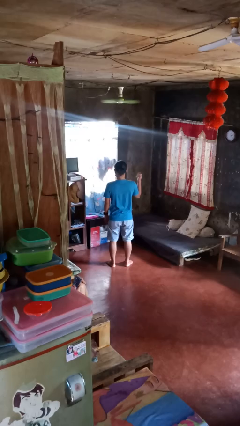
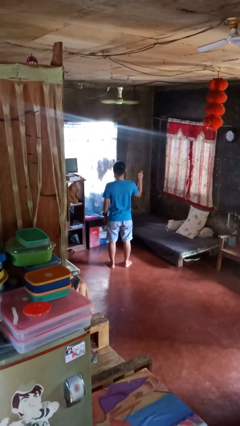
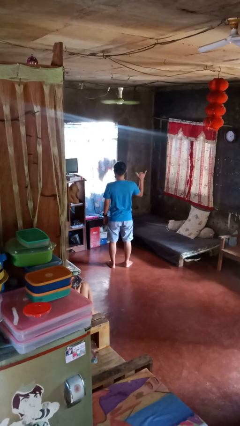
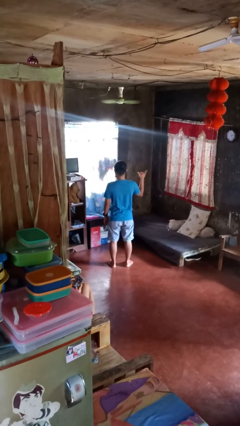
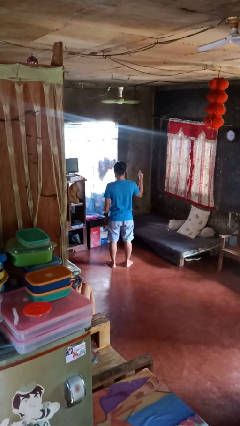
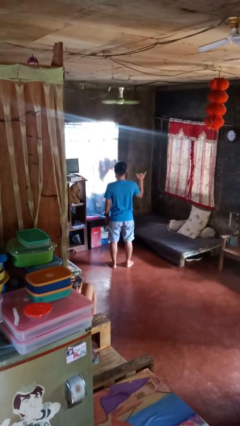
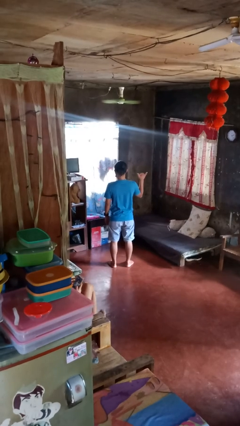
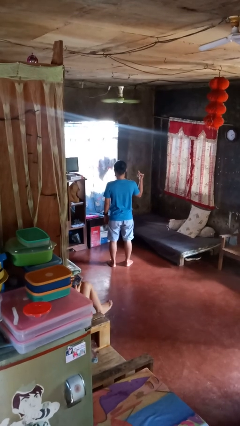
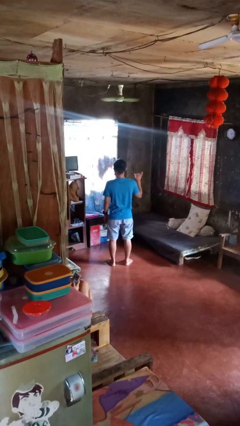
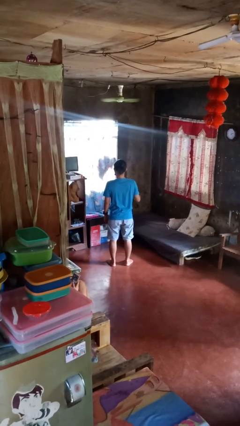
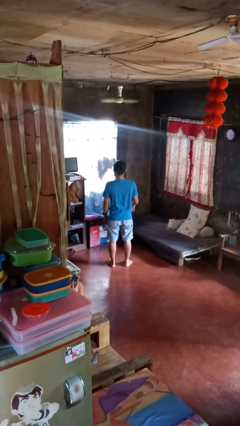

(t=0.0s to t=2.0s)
person gestures hang loose

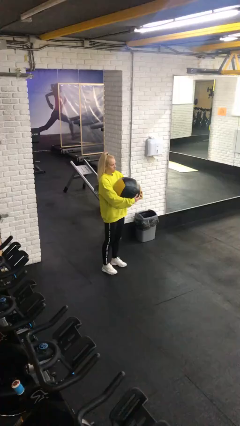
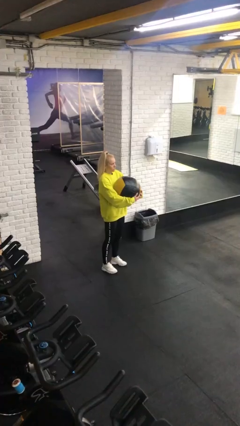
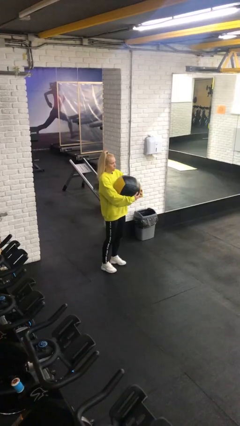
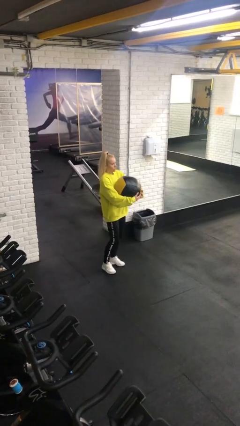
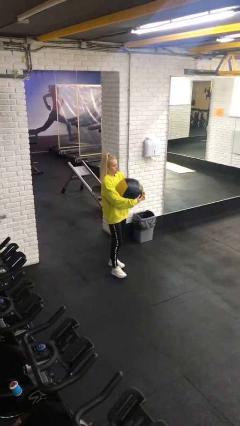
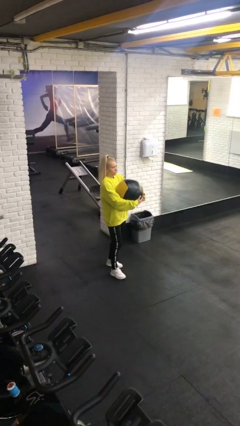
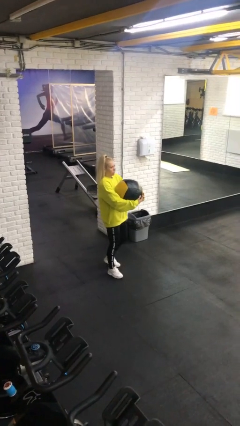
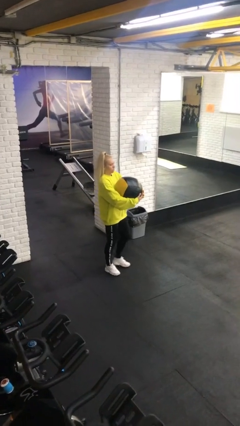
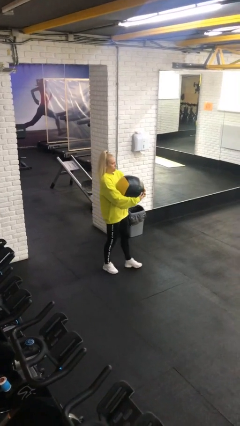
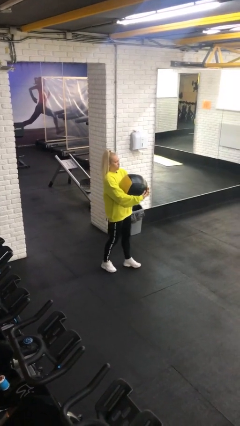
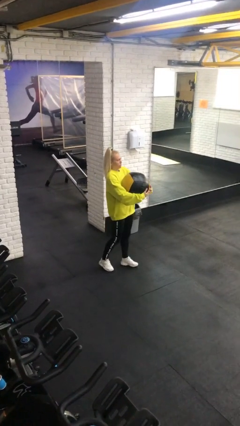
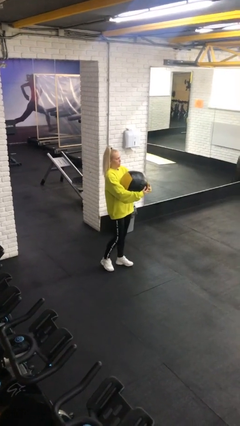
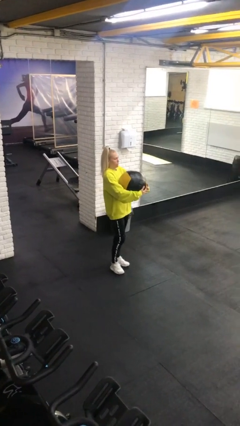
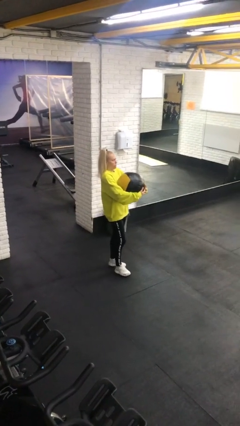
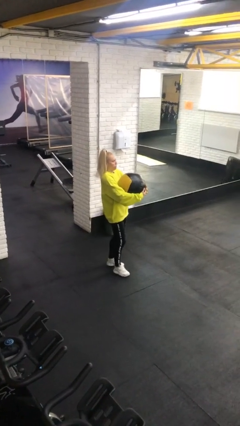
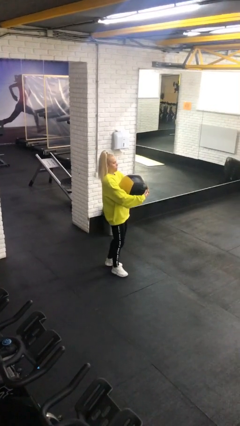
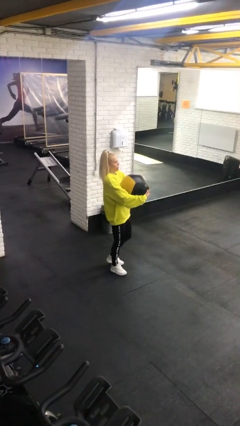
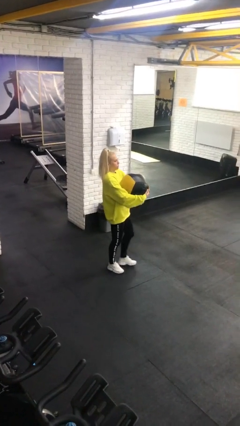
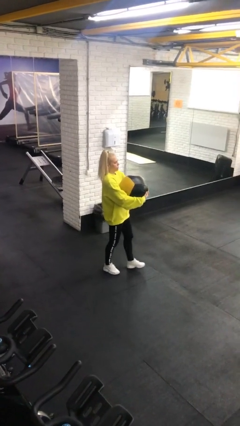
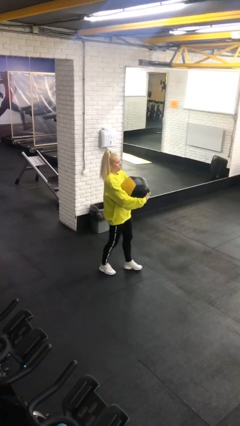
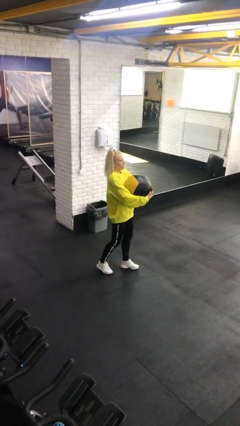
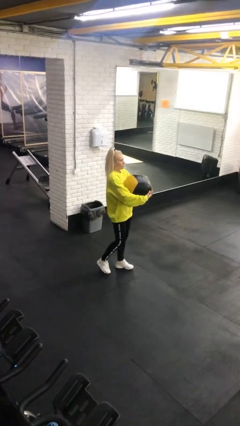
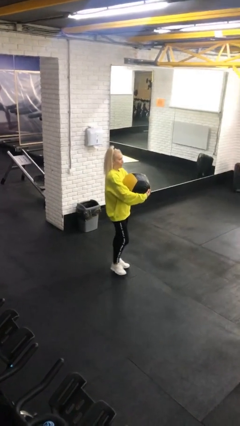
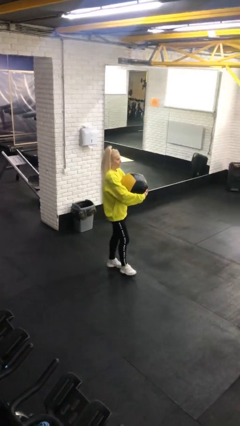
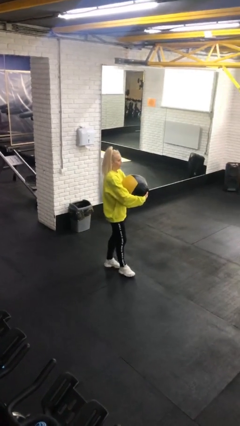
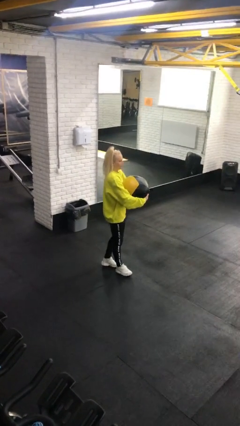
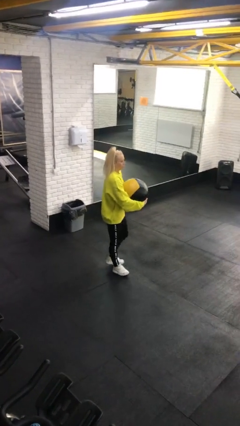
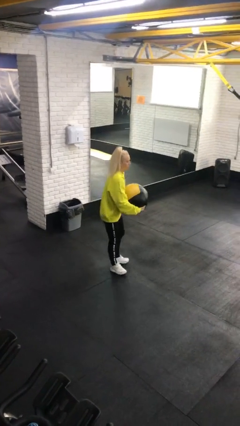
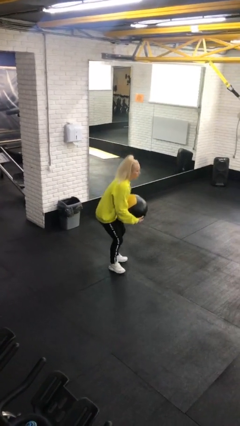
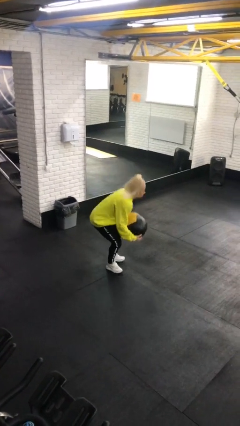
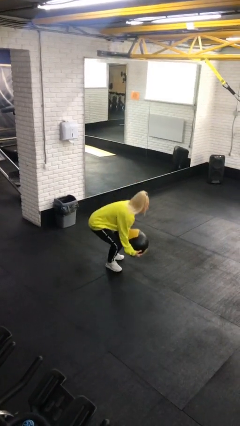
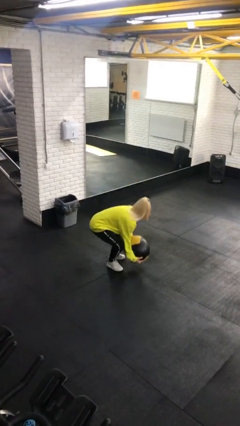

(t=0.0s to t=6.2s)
person carries heavy object

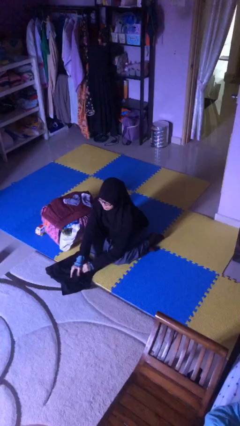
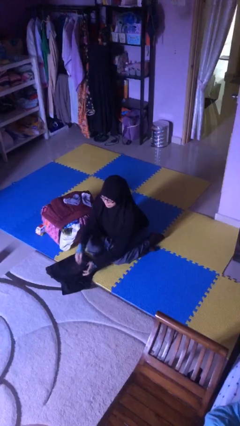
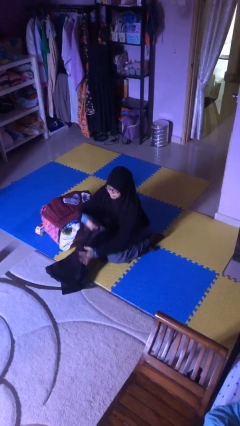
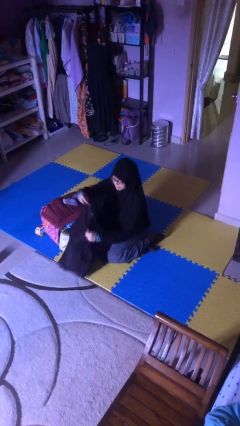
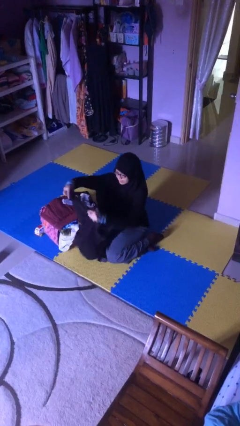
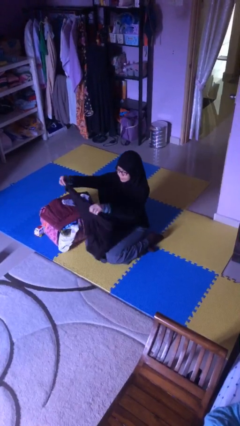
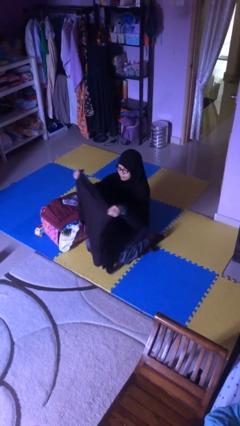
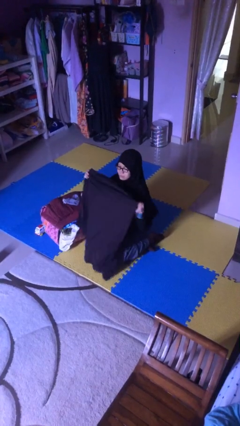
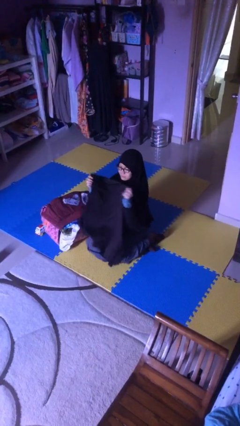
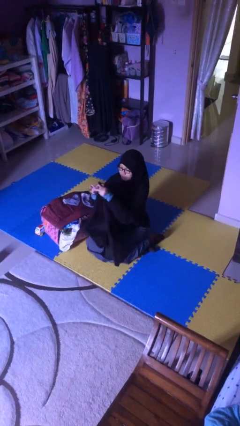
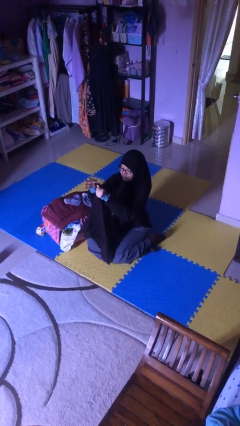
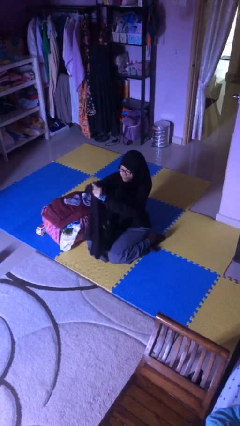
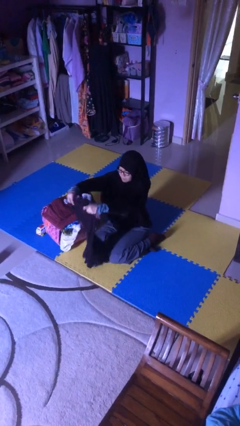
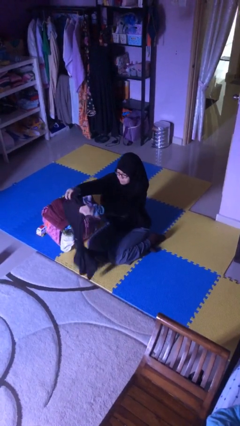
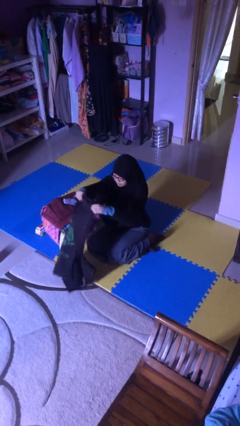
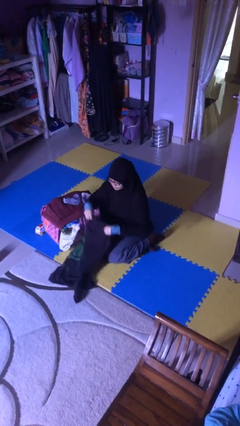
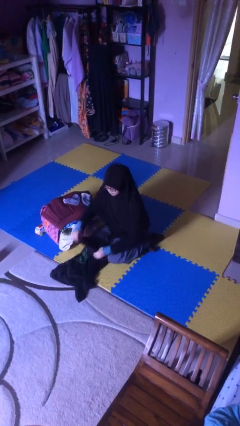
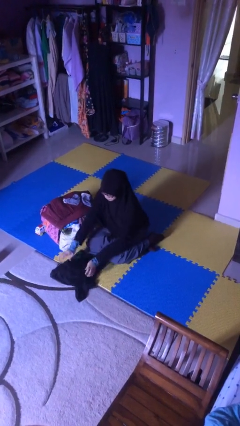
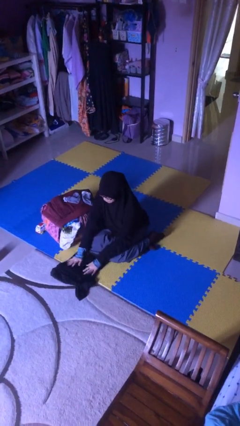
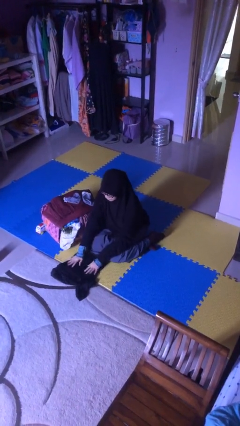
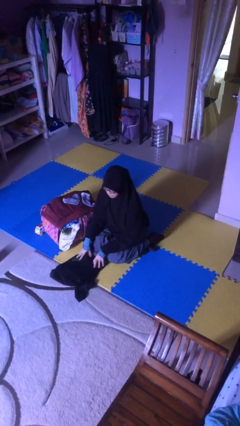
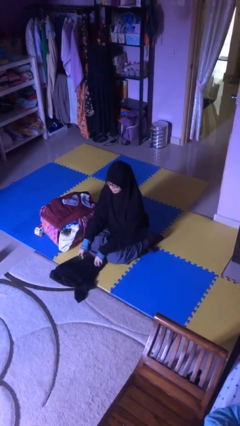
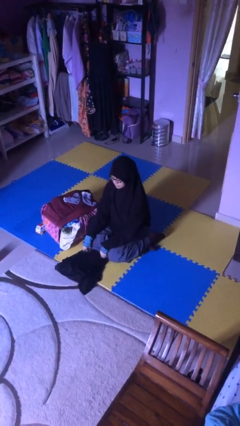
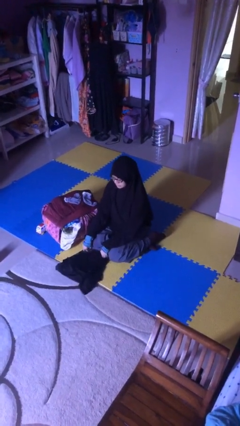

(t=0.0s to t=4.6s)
person folds shirt

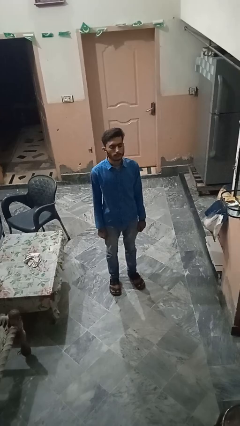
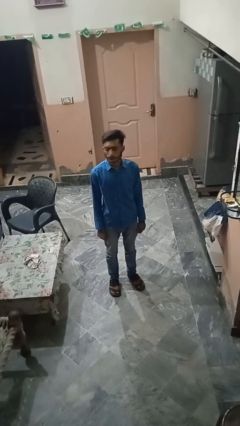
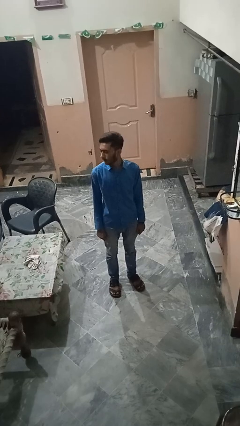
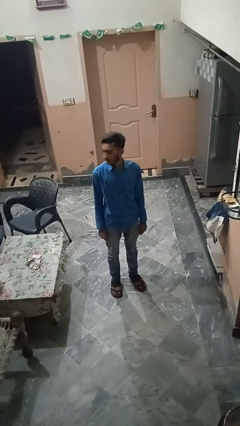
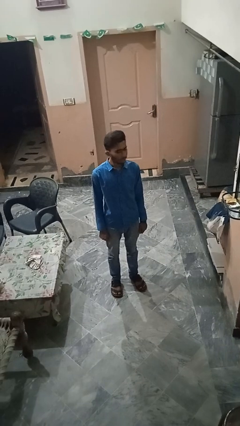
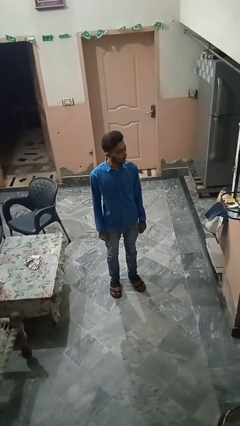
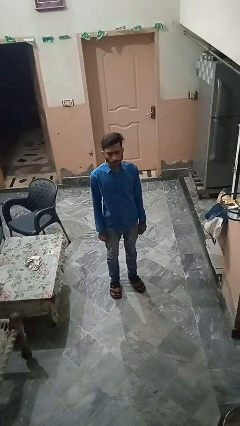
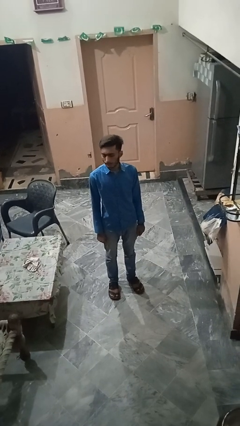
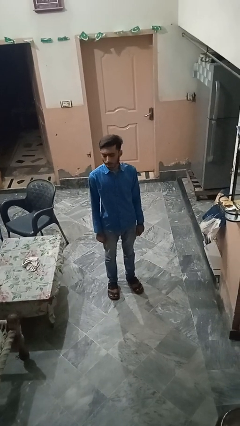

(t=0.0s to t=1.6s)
person shakes head

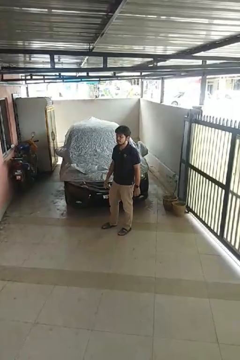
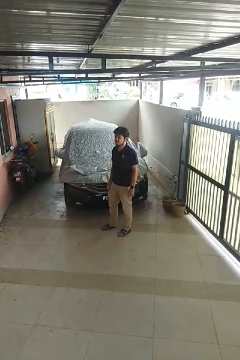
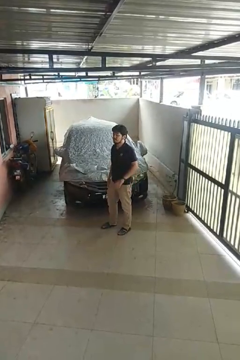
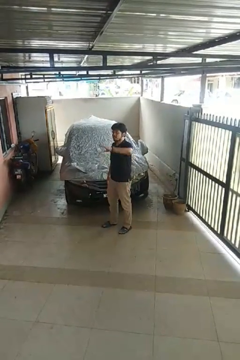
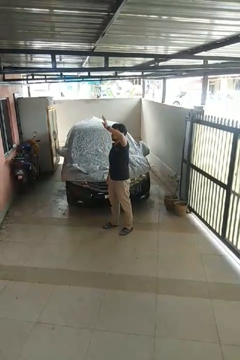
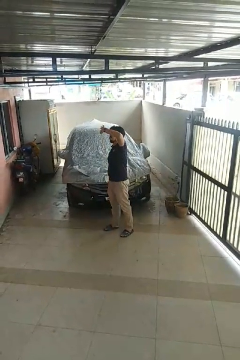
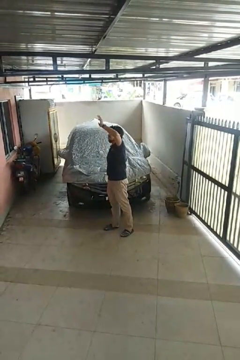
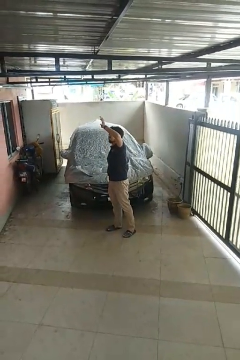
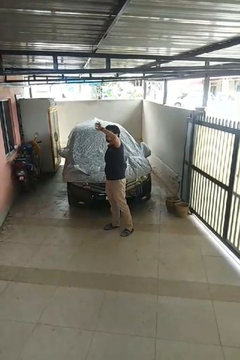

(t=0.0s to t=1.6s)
person waves at person

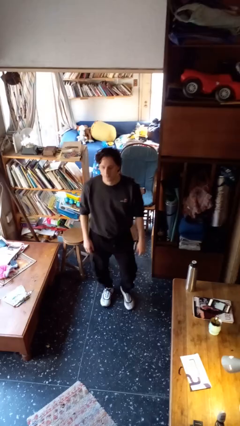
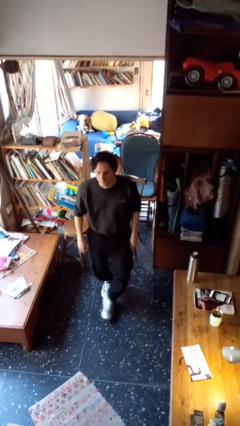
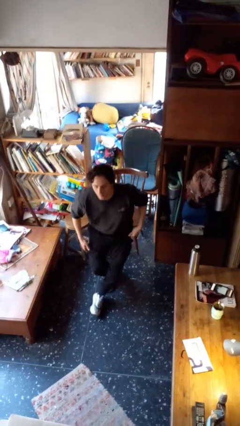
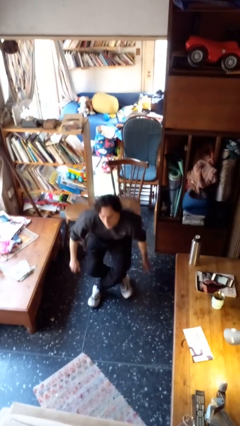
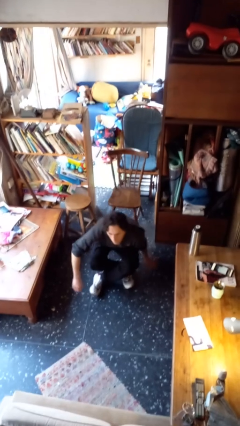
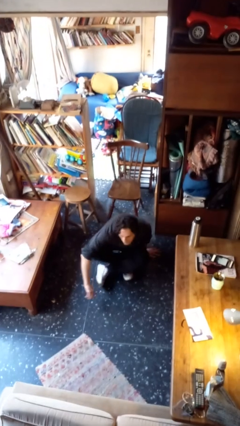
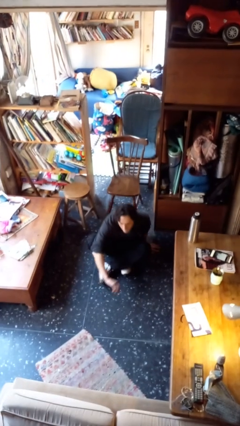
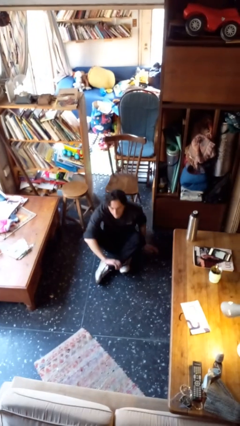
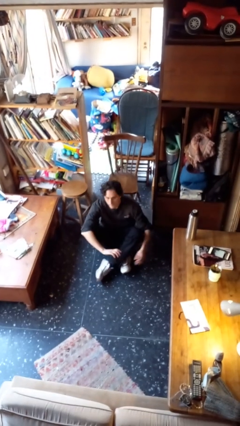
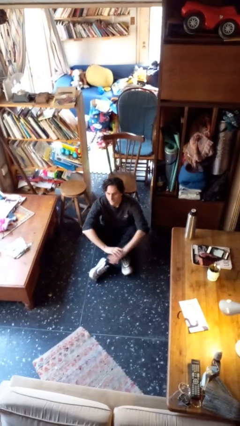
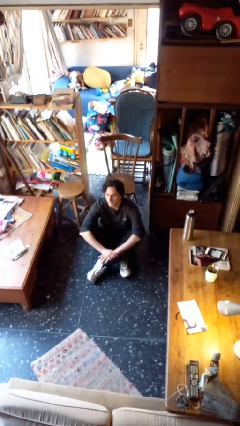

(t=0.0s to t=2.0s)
person sits crisscross
